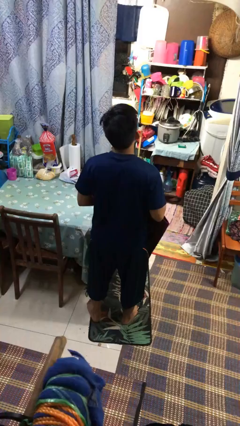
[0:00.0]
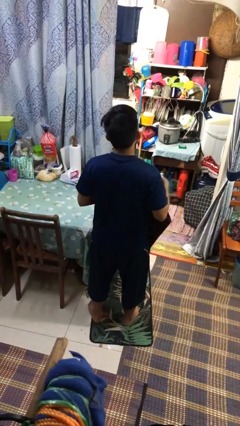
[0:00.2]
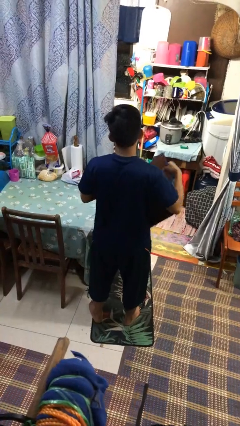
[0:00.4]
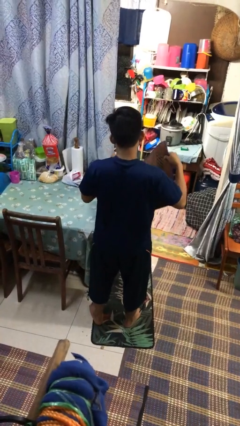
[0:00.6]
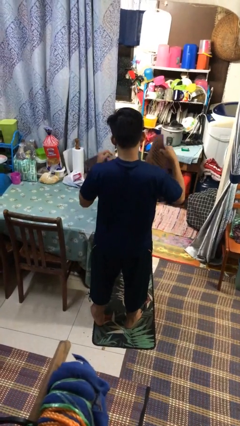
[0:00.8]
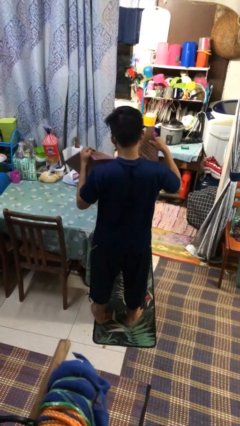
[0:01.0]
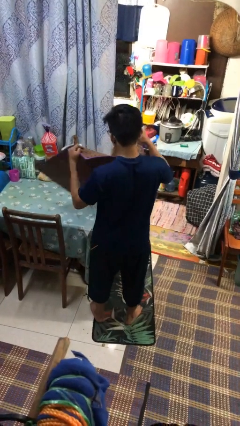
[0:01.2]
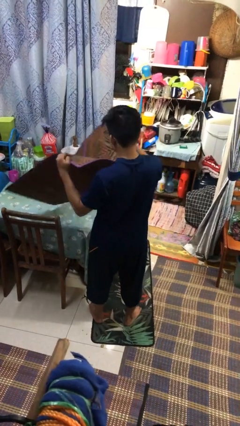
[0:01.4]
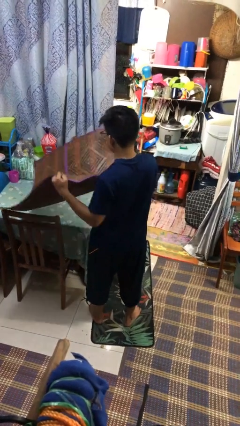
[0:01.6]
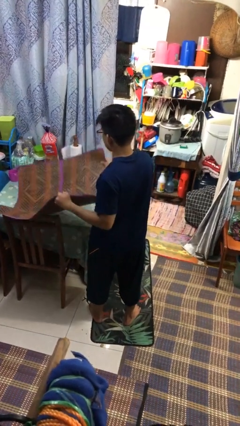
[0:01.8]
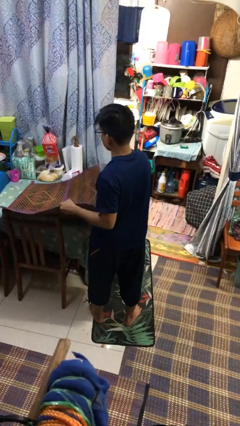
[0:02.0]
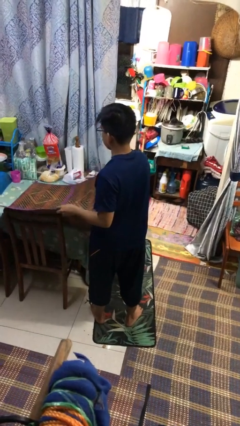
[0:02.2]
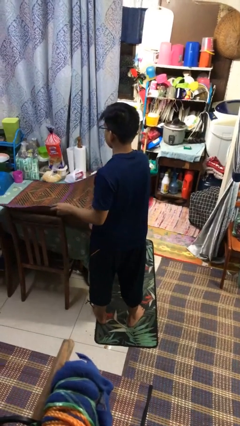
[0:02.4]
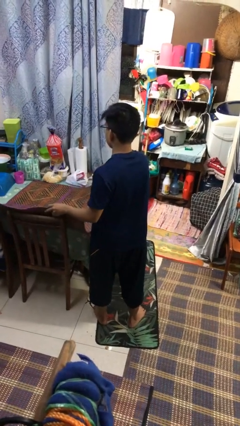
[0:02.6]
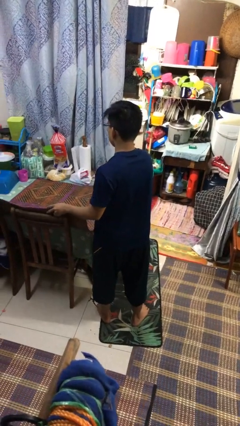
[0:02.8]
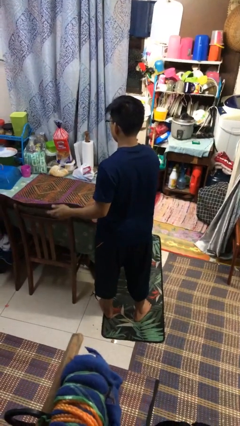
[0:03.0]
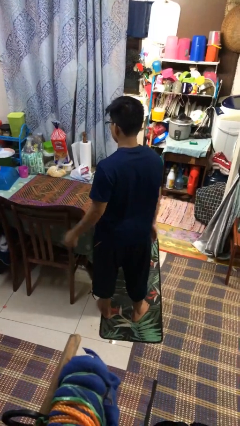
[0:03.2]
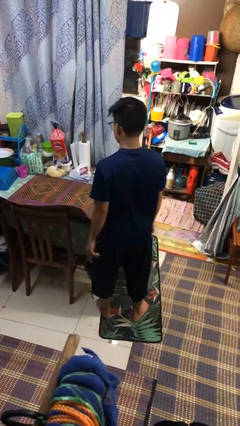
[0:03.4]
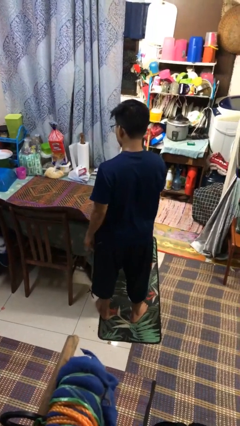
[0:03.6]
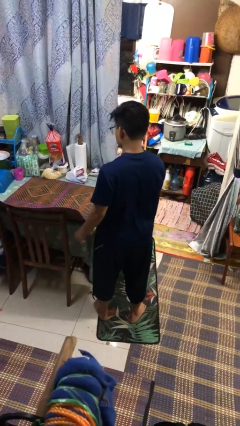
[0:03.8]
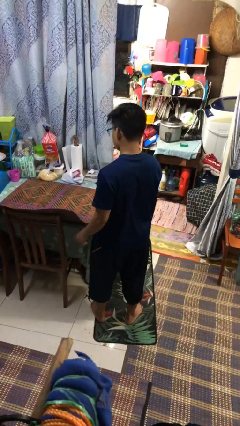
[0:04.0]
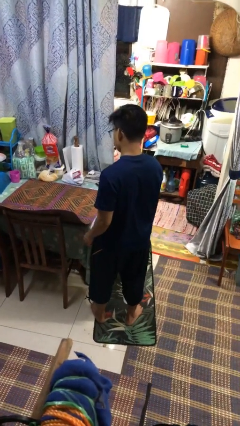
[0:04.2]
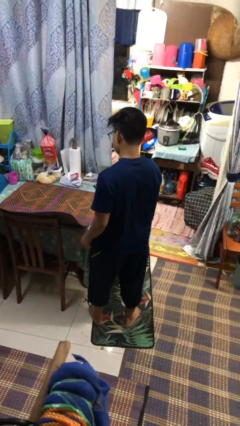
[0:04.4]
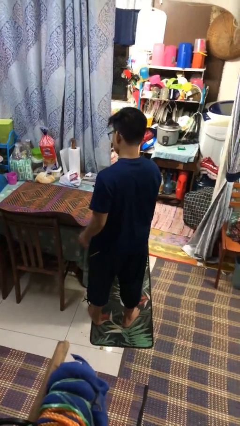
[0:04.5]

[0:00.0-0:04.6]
person spreads tablecloth

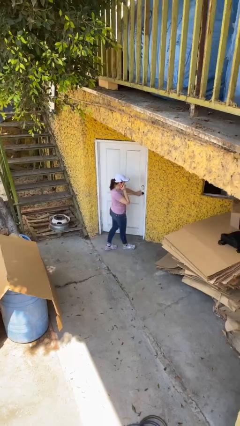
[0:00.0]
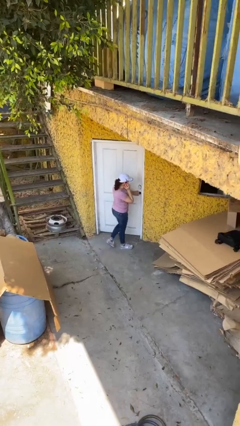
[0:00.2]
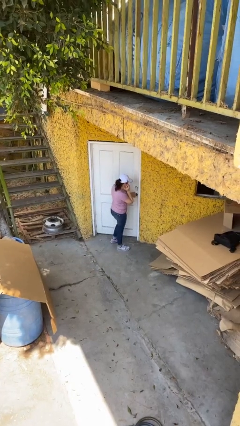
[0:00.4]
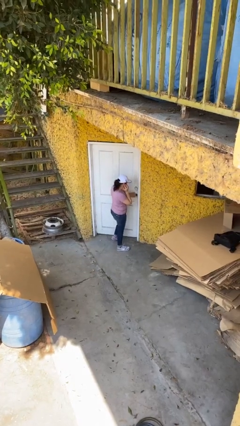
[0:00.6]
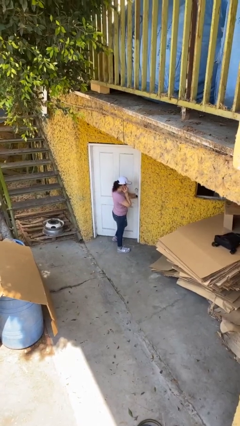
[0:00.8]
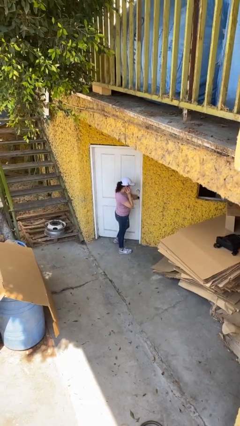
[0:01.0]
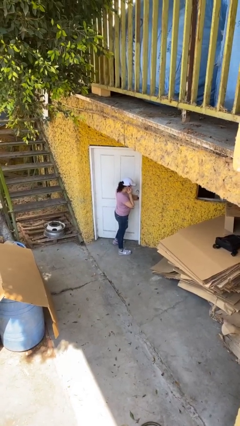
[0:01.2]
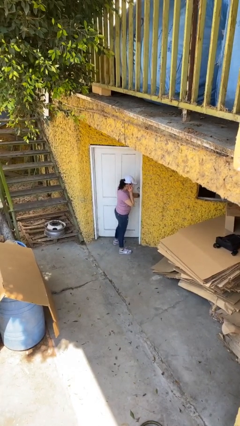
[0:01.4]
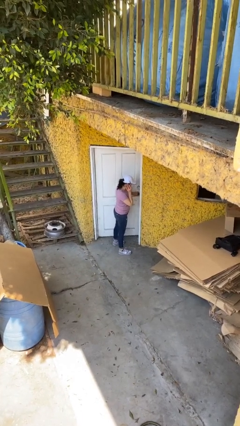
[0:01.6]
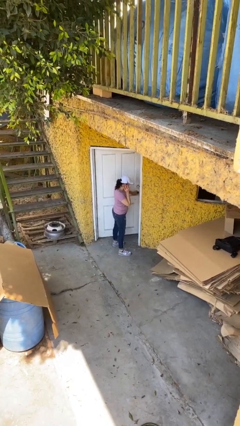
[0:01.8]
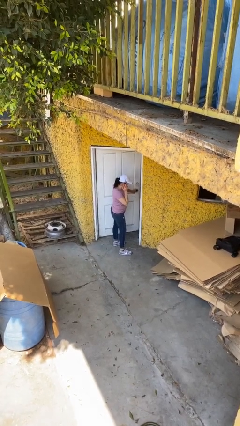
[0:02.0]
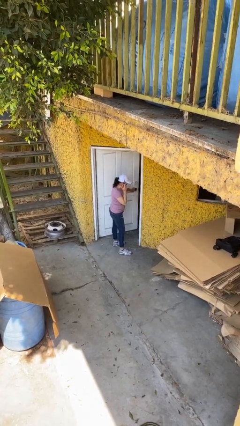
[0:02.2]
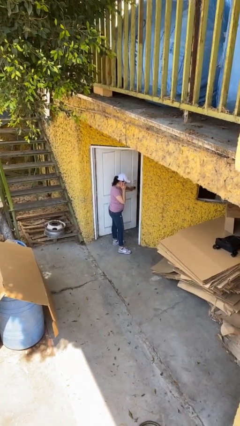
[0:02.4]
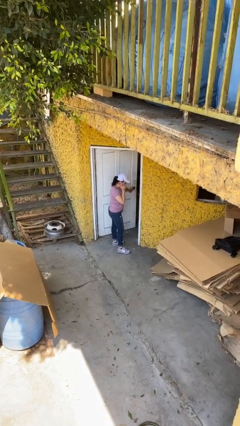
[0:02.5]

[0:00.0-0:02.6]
person opens facility door

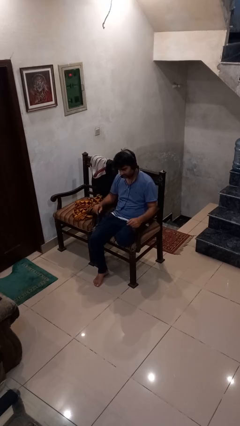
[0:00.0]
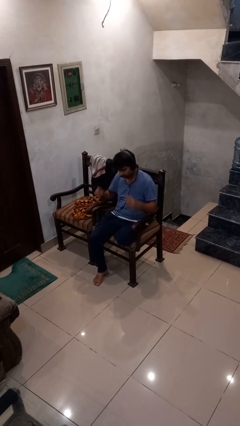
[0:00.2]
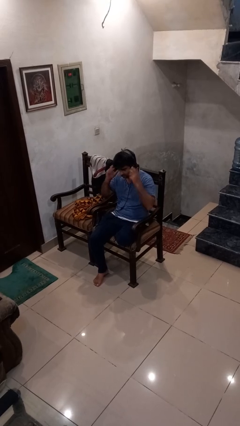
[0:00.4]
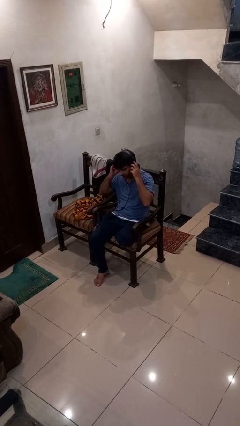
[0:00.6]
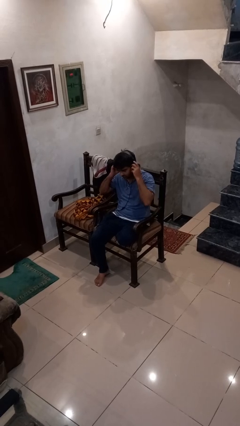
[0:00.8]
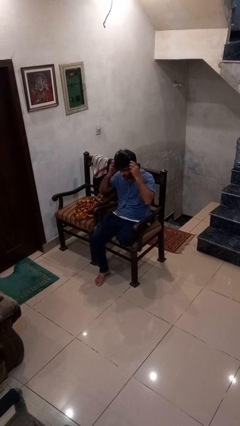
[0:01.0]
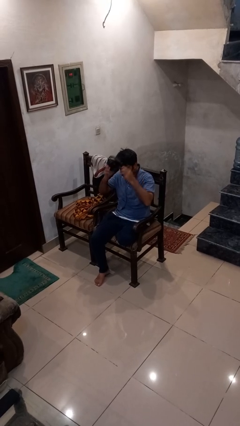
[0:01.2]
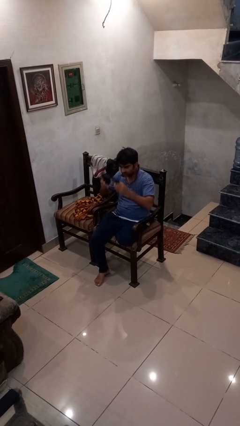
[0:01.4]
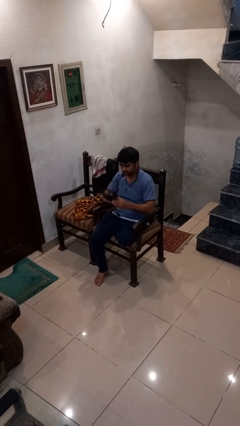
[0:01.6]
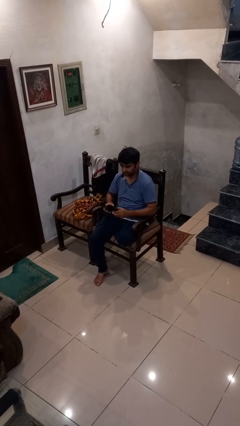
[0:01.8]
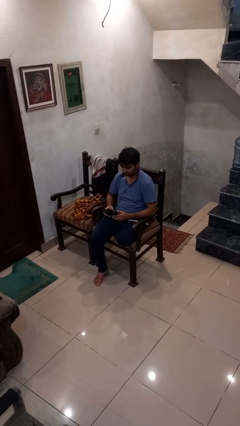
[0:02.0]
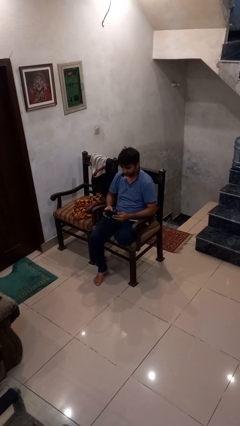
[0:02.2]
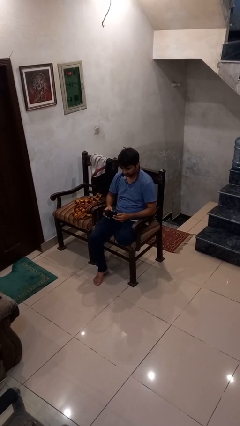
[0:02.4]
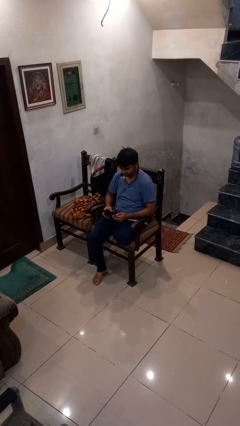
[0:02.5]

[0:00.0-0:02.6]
person takes off headphones

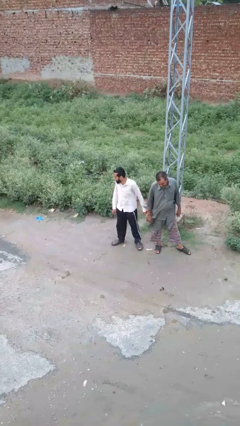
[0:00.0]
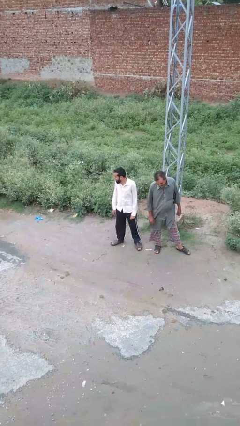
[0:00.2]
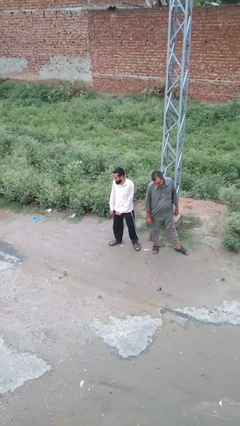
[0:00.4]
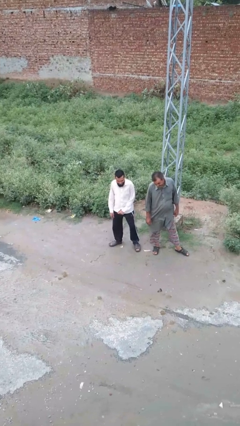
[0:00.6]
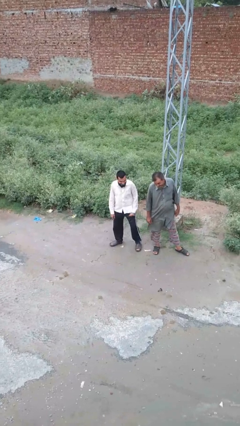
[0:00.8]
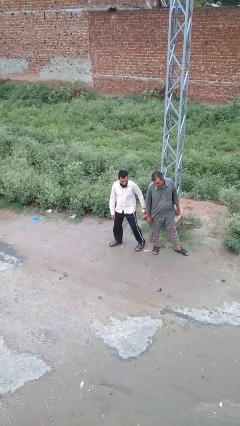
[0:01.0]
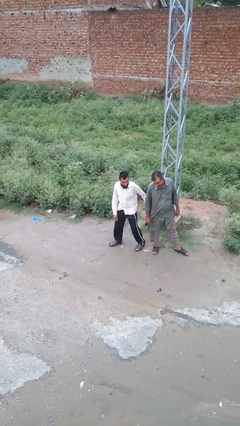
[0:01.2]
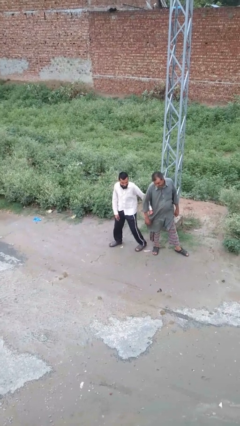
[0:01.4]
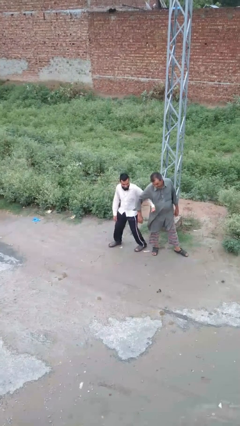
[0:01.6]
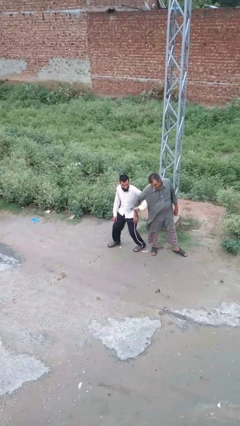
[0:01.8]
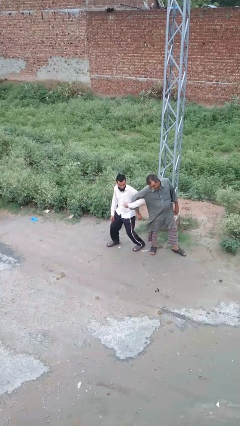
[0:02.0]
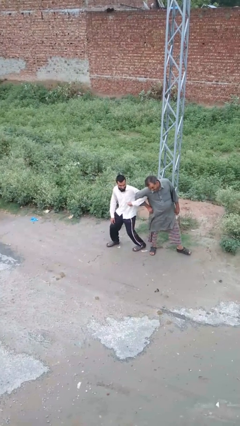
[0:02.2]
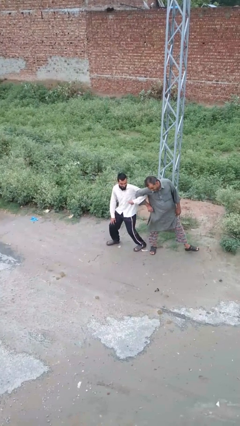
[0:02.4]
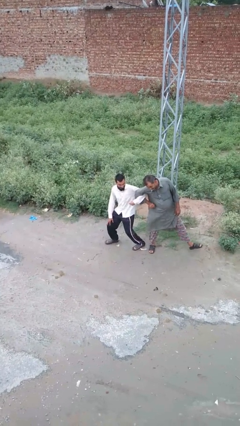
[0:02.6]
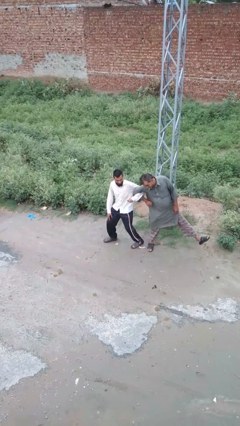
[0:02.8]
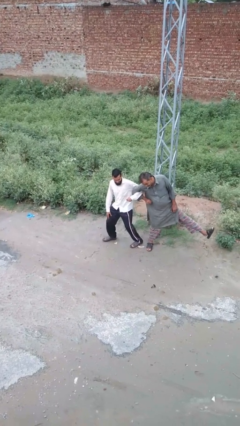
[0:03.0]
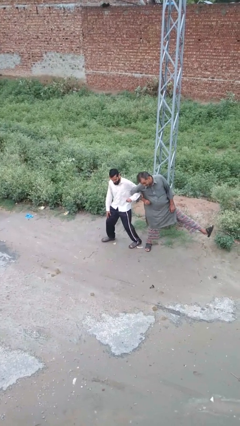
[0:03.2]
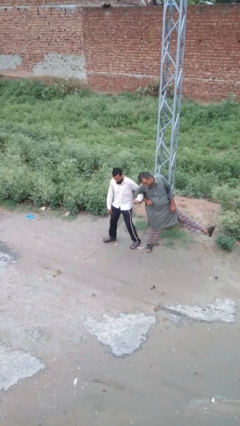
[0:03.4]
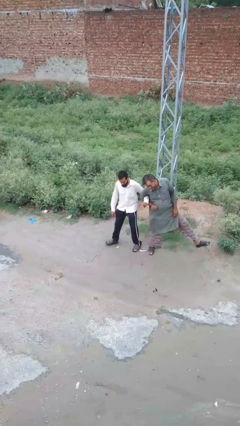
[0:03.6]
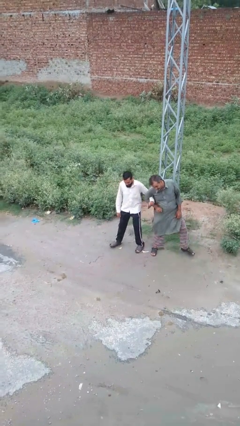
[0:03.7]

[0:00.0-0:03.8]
person grabs person by forearm

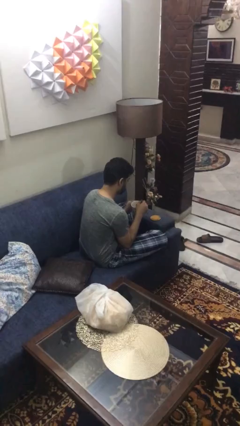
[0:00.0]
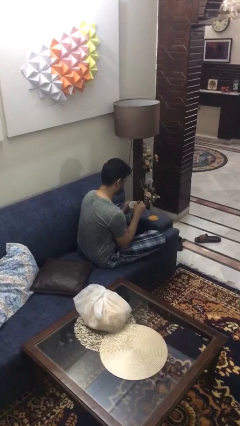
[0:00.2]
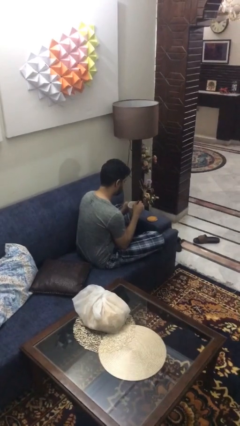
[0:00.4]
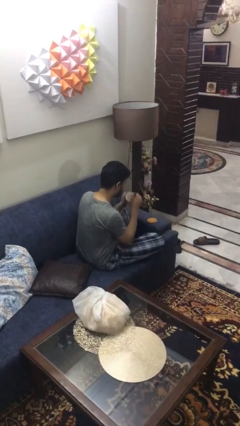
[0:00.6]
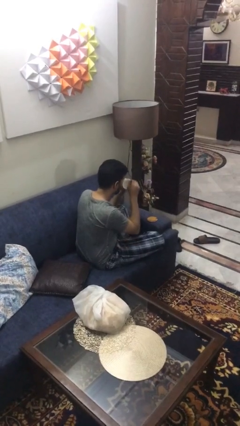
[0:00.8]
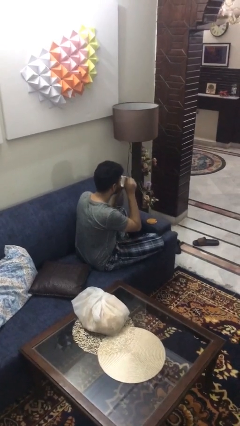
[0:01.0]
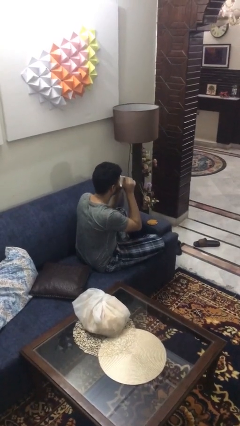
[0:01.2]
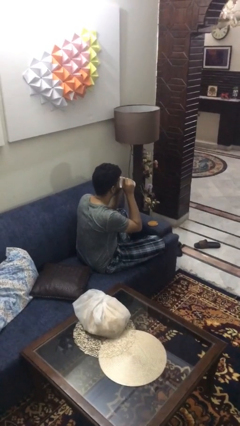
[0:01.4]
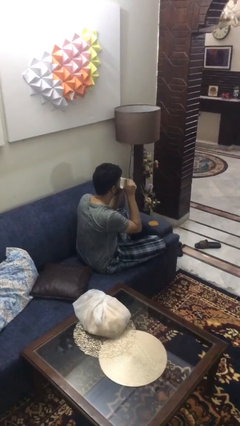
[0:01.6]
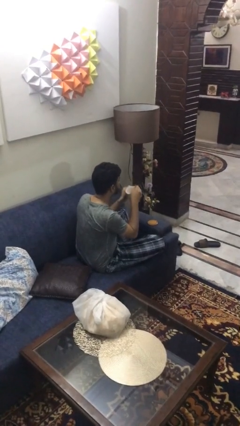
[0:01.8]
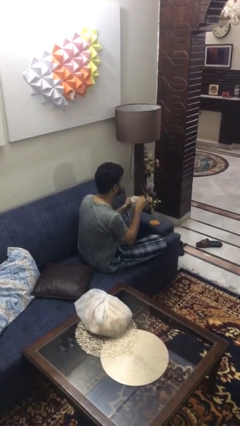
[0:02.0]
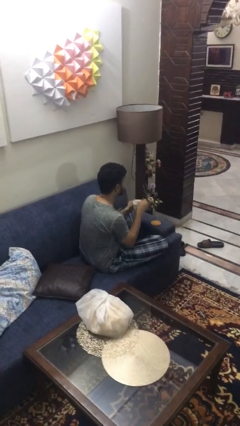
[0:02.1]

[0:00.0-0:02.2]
person drinks from mug

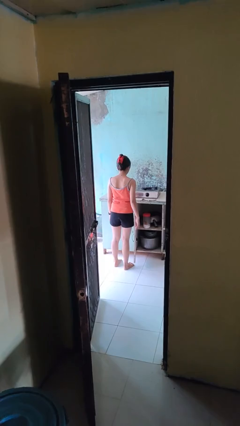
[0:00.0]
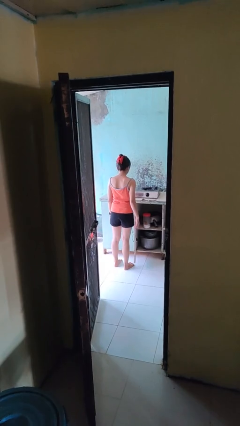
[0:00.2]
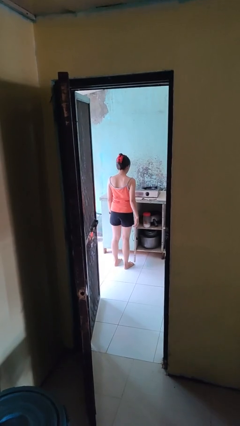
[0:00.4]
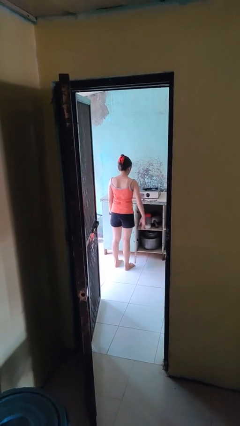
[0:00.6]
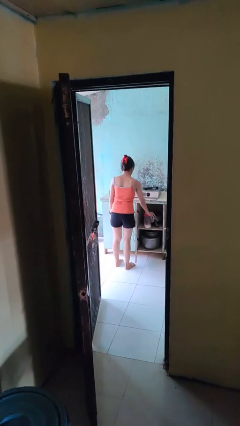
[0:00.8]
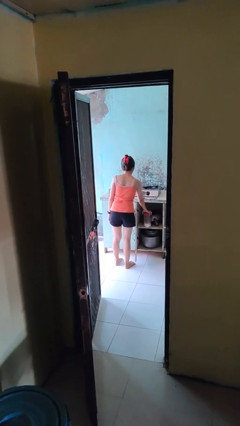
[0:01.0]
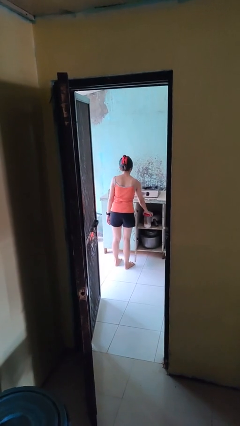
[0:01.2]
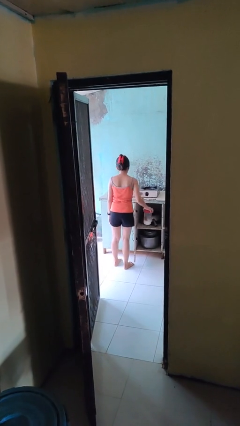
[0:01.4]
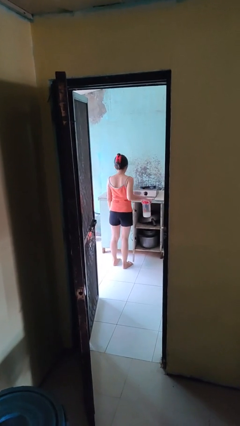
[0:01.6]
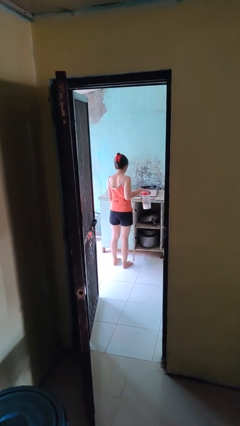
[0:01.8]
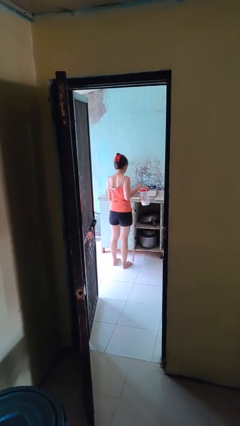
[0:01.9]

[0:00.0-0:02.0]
person picks up object from cabinet
